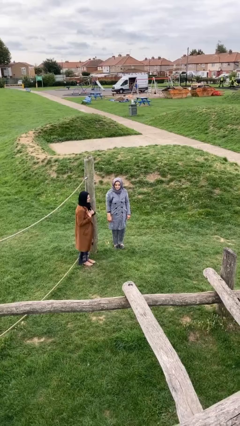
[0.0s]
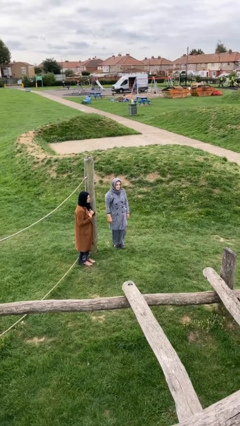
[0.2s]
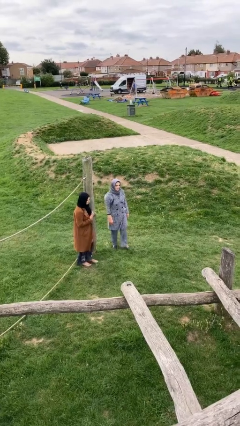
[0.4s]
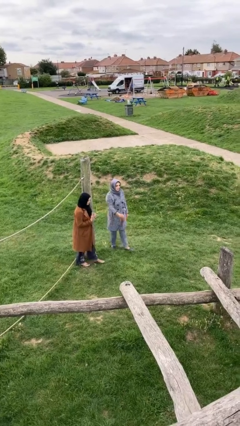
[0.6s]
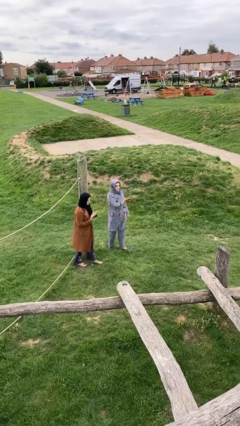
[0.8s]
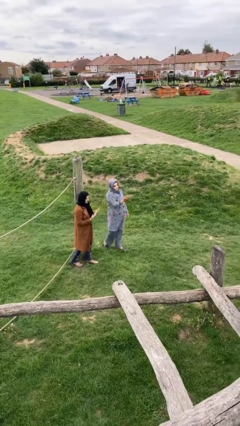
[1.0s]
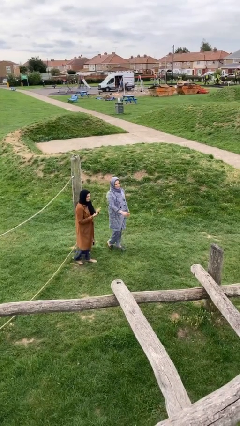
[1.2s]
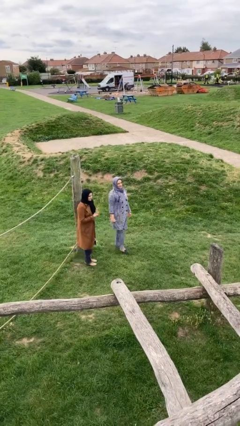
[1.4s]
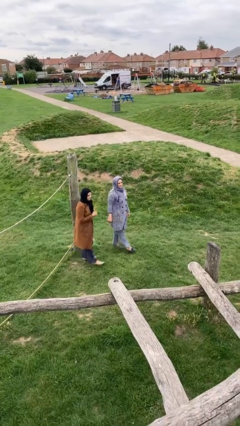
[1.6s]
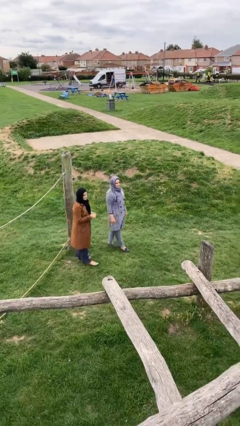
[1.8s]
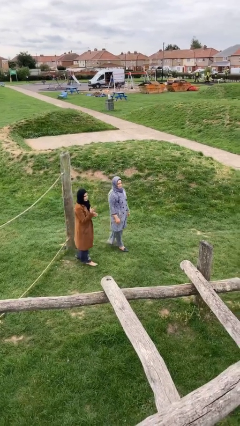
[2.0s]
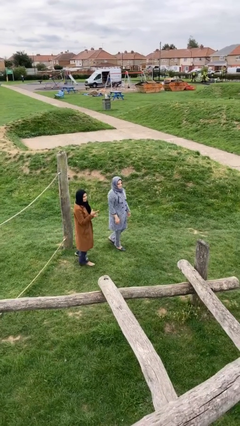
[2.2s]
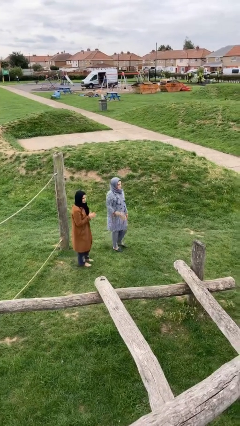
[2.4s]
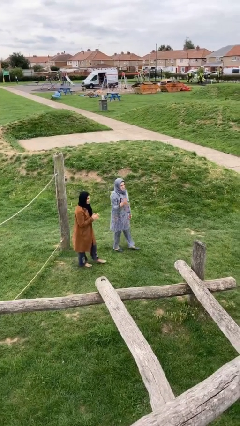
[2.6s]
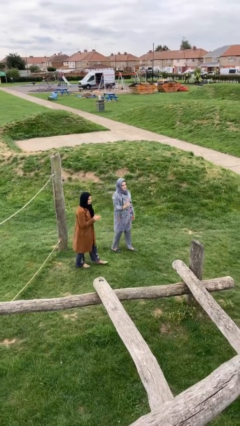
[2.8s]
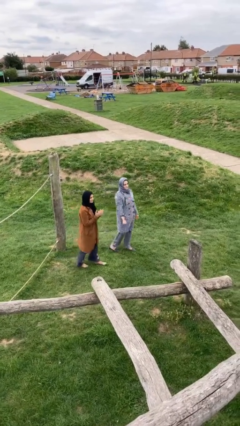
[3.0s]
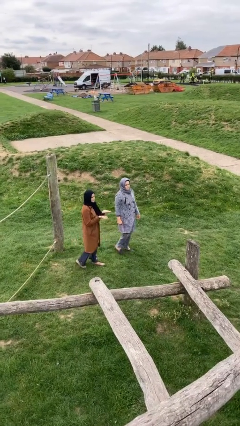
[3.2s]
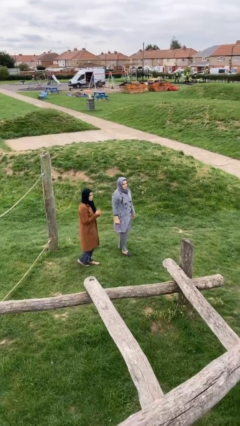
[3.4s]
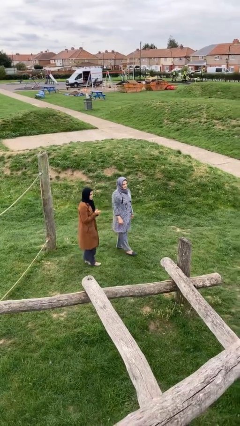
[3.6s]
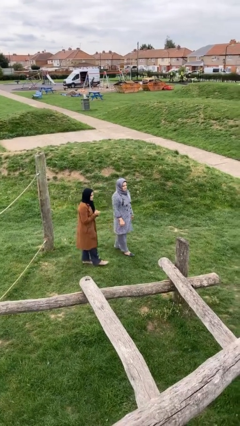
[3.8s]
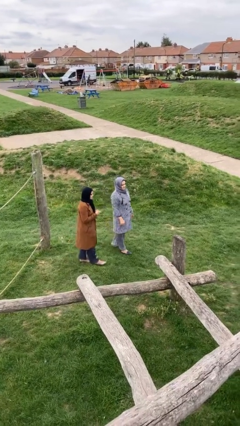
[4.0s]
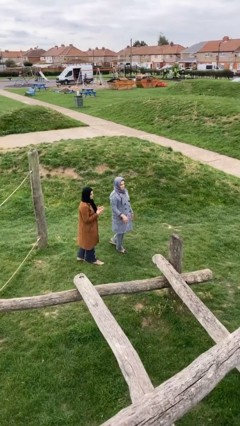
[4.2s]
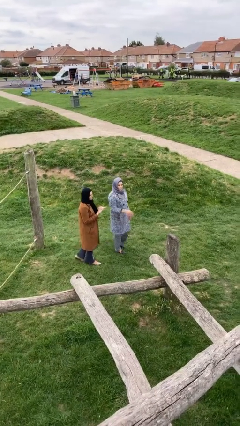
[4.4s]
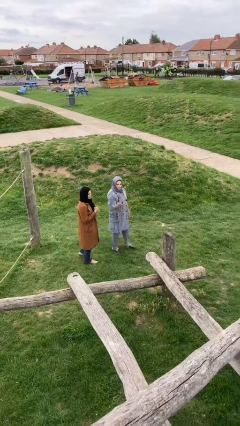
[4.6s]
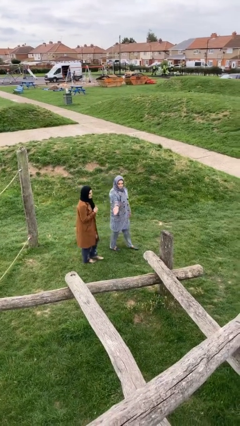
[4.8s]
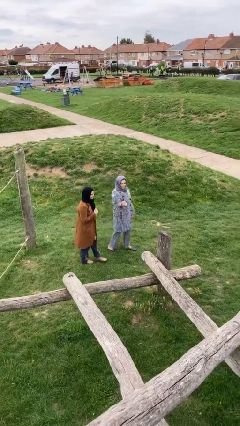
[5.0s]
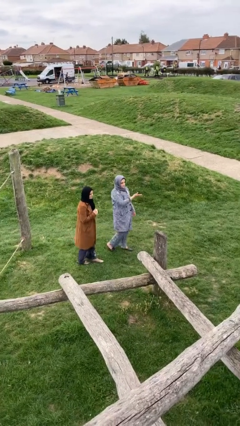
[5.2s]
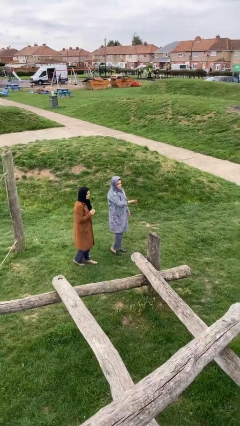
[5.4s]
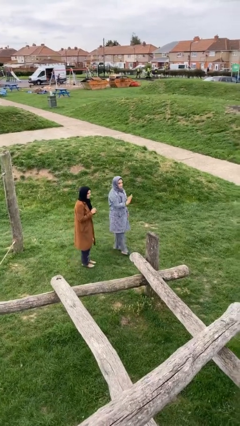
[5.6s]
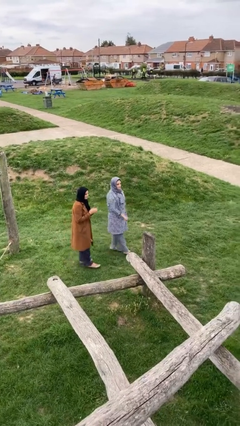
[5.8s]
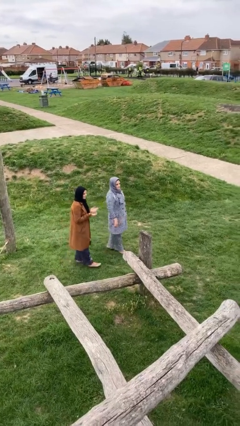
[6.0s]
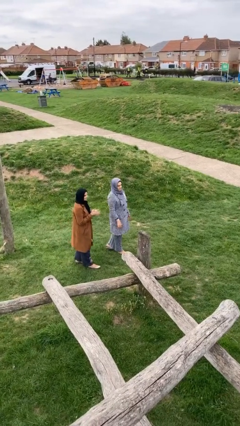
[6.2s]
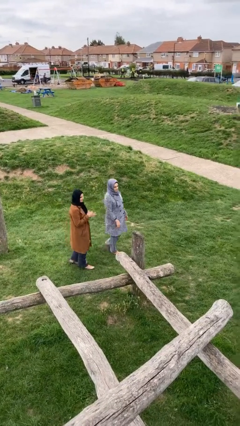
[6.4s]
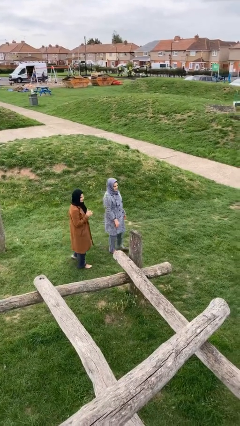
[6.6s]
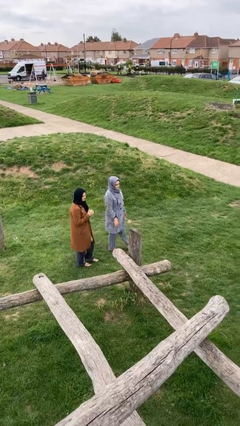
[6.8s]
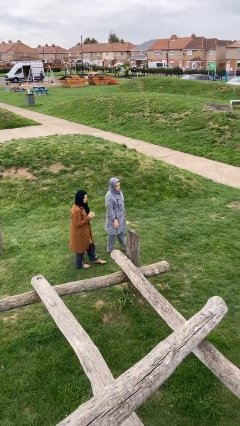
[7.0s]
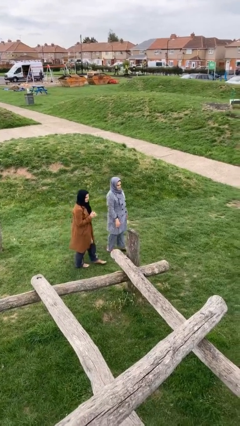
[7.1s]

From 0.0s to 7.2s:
person talks to person

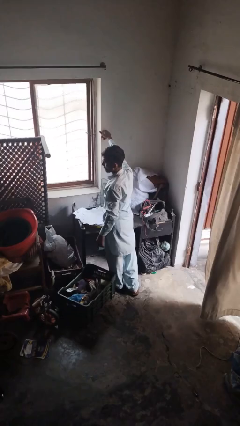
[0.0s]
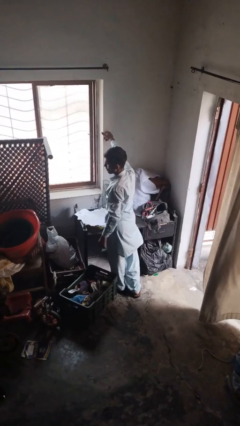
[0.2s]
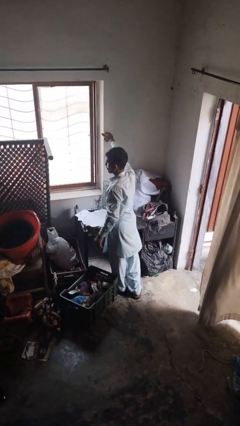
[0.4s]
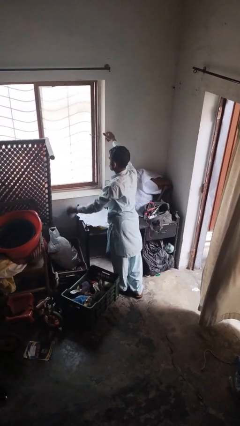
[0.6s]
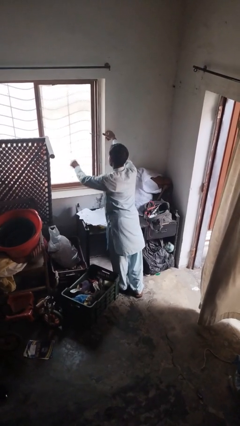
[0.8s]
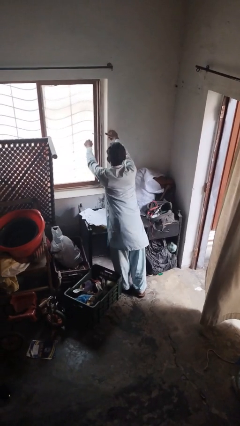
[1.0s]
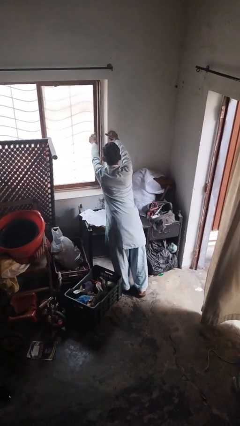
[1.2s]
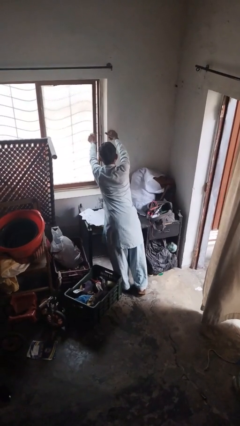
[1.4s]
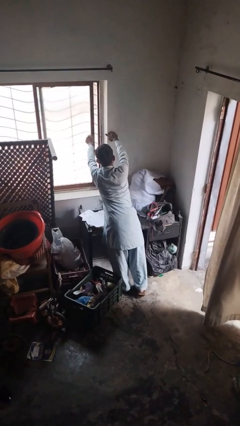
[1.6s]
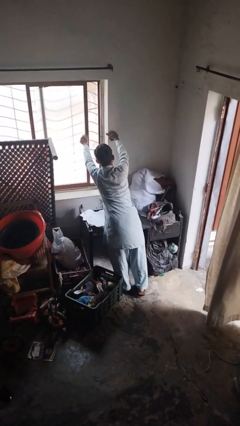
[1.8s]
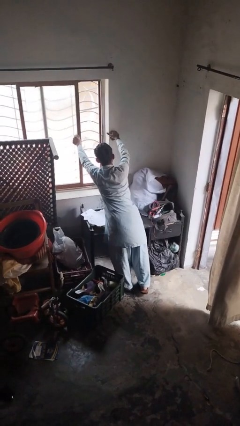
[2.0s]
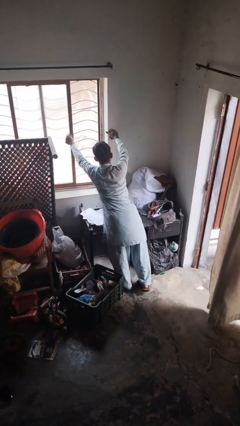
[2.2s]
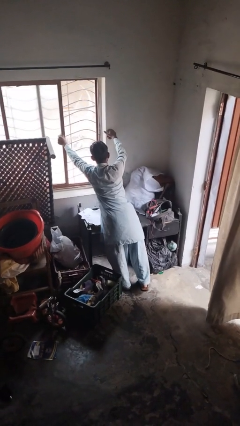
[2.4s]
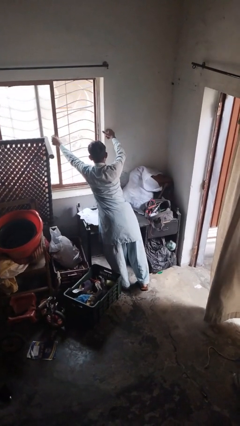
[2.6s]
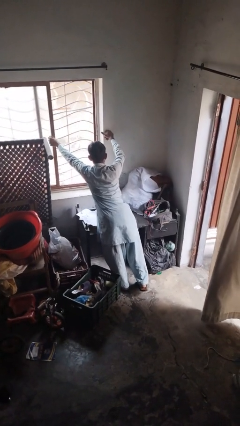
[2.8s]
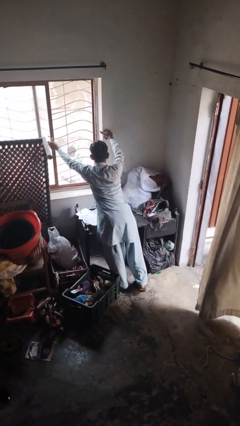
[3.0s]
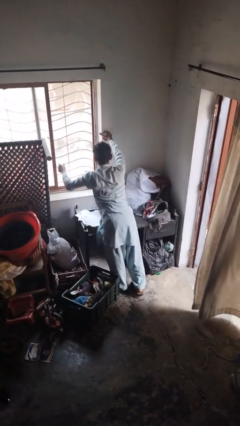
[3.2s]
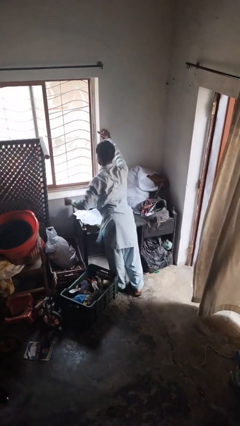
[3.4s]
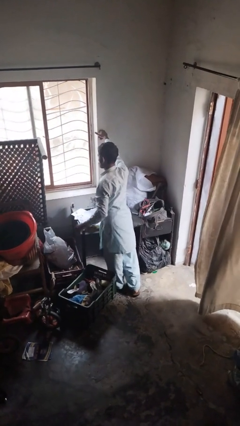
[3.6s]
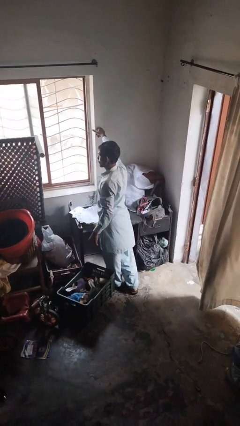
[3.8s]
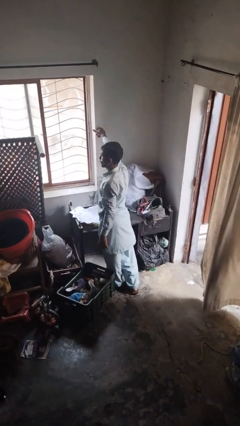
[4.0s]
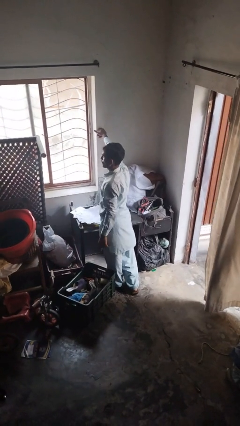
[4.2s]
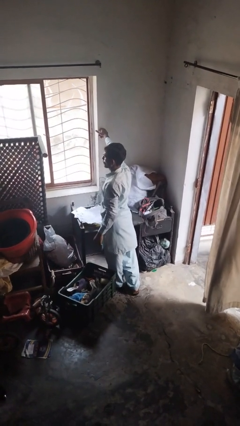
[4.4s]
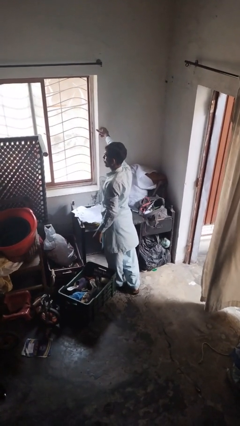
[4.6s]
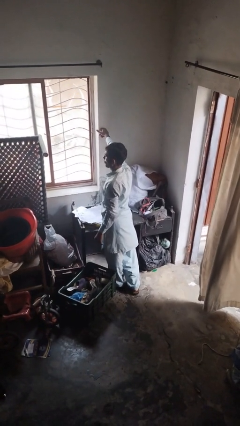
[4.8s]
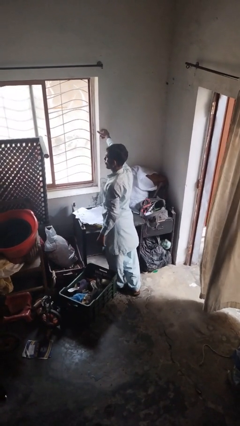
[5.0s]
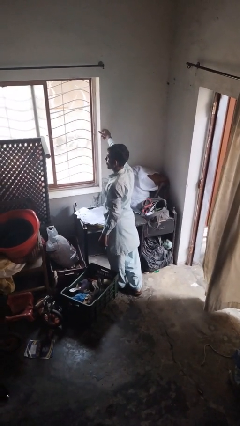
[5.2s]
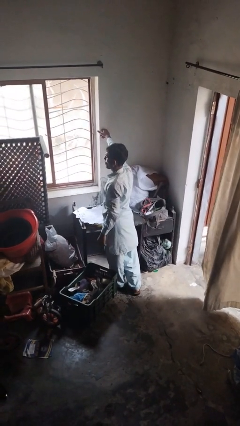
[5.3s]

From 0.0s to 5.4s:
person opens home window

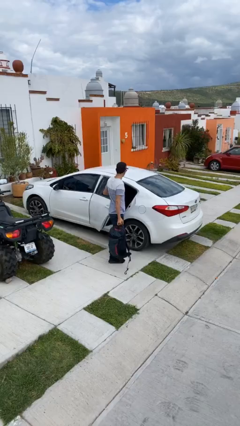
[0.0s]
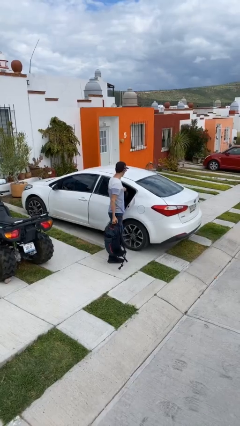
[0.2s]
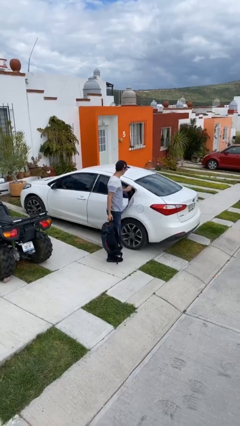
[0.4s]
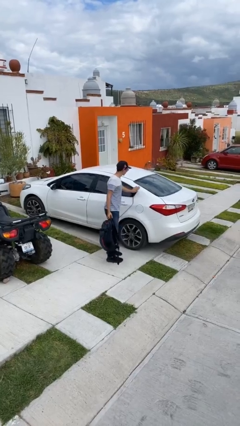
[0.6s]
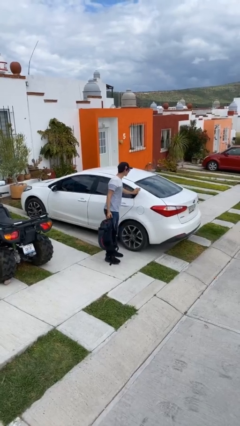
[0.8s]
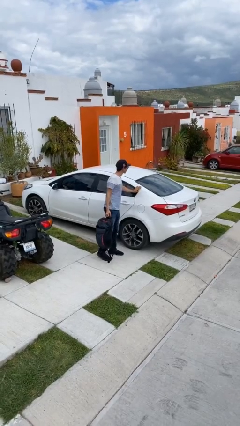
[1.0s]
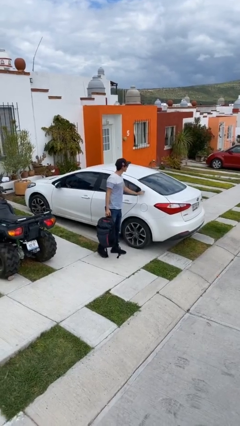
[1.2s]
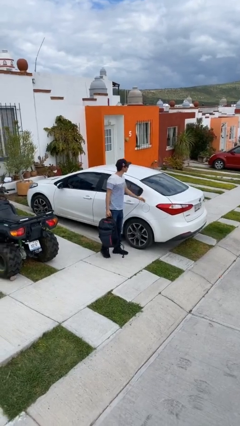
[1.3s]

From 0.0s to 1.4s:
person closes car door

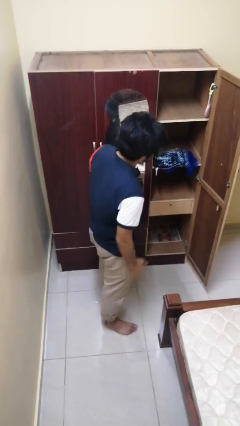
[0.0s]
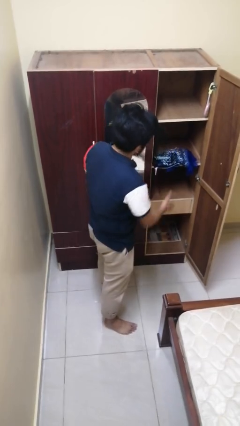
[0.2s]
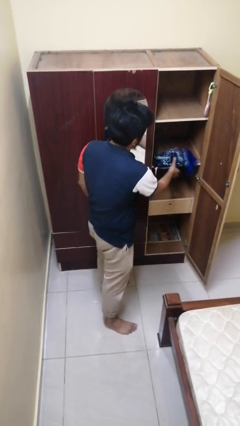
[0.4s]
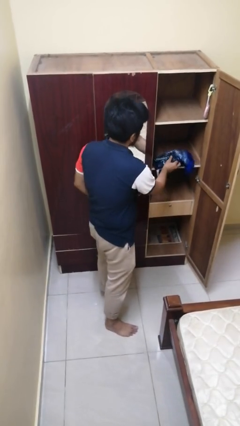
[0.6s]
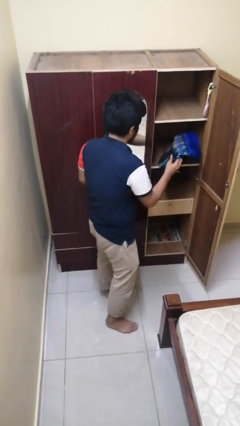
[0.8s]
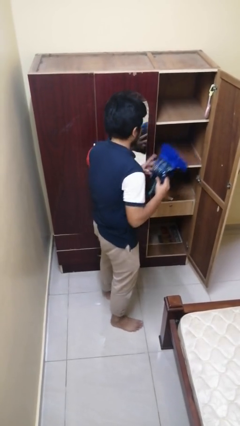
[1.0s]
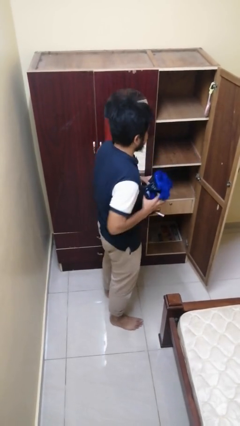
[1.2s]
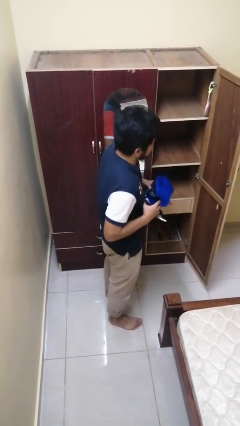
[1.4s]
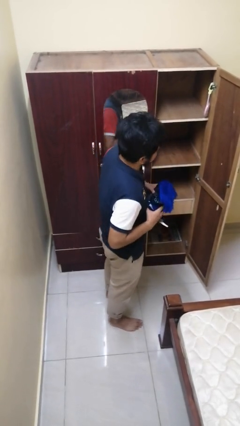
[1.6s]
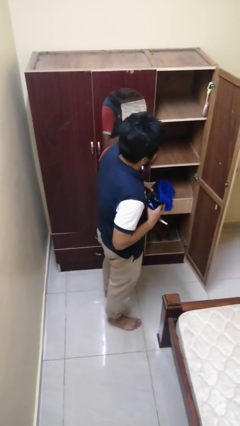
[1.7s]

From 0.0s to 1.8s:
person picks up object from cabinet

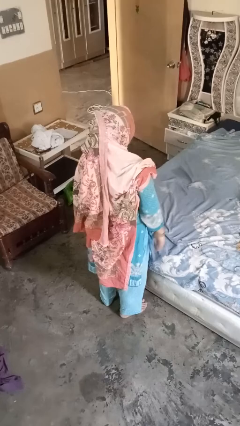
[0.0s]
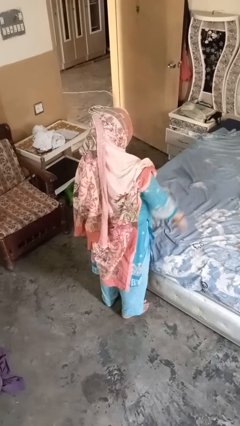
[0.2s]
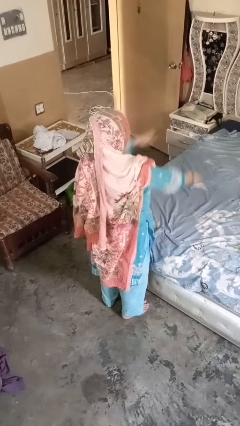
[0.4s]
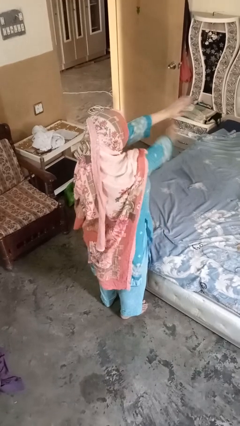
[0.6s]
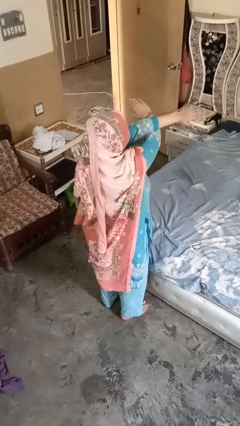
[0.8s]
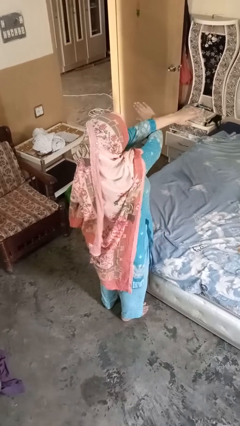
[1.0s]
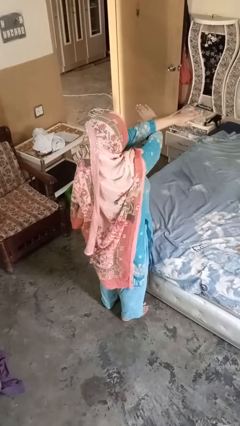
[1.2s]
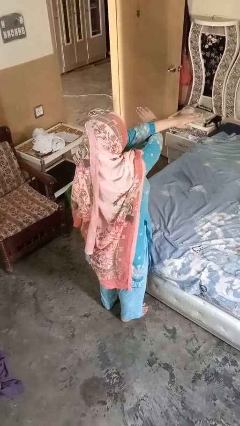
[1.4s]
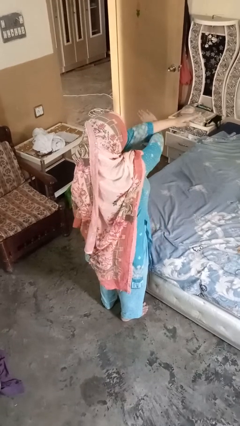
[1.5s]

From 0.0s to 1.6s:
person gestures arms x
